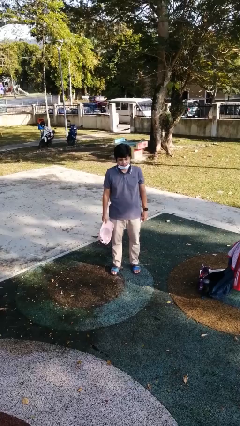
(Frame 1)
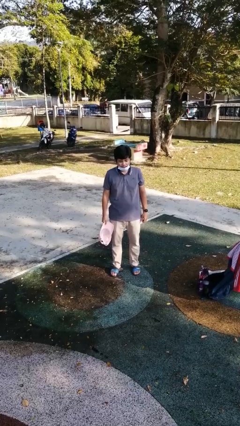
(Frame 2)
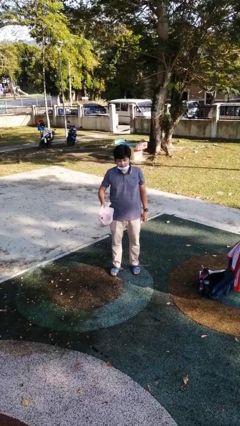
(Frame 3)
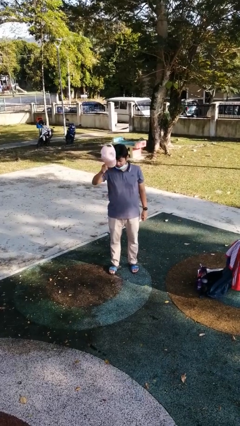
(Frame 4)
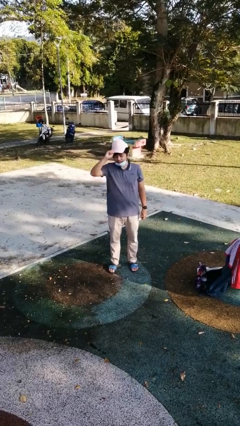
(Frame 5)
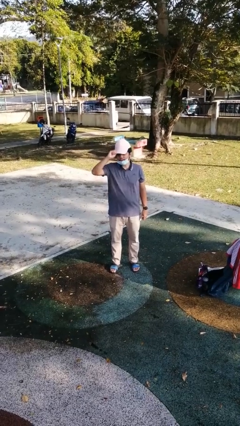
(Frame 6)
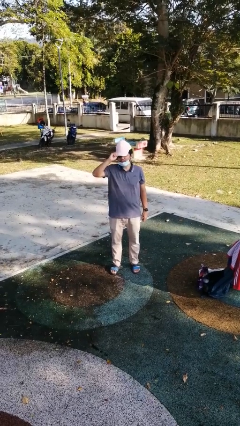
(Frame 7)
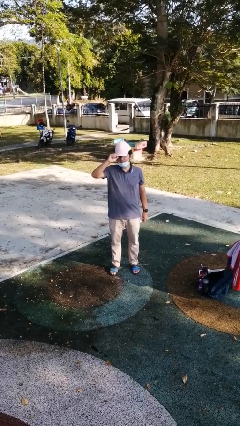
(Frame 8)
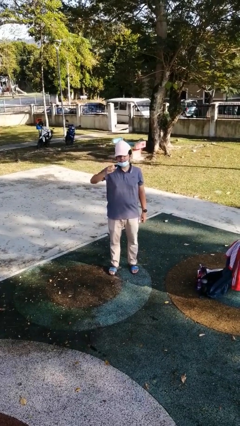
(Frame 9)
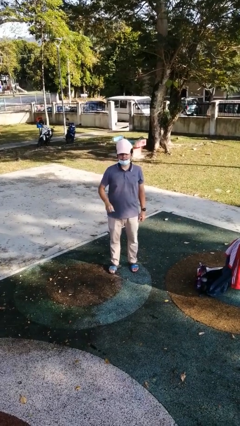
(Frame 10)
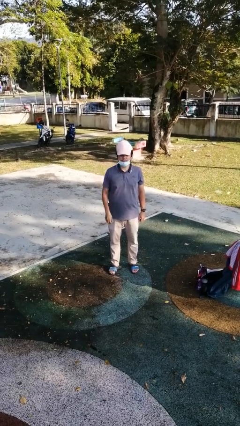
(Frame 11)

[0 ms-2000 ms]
person puts on hat

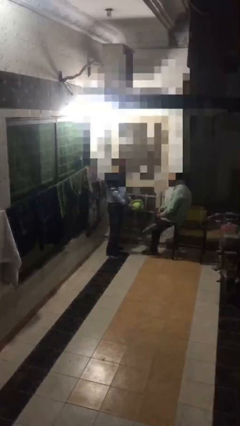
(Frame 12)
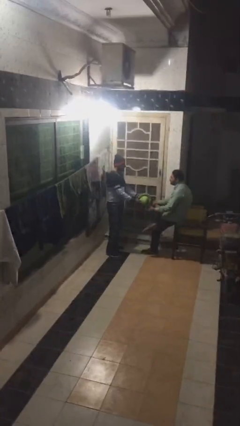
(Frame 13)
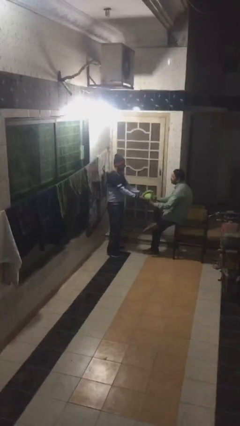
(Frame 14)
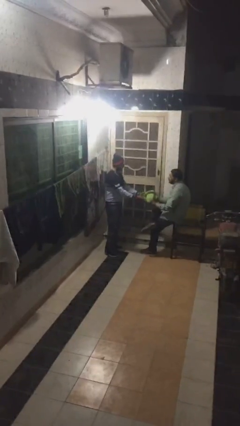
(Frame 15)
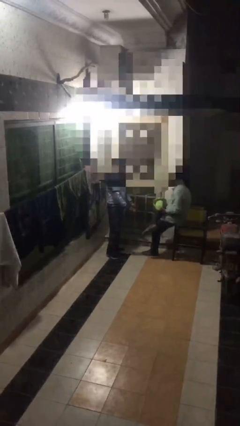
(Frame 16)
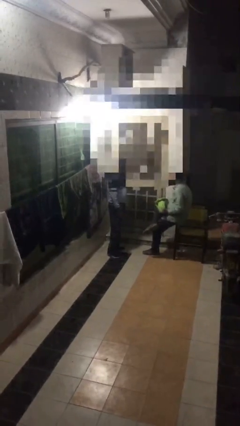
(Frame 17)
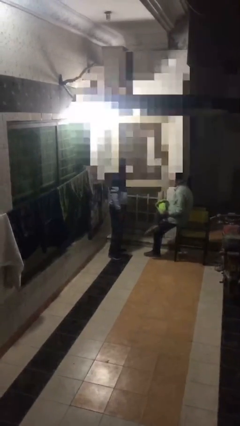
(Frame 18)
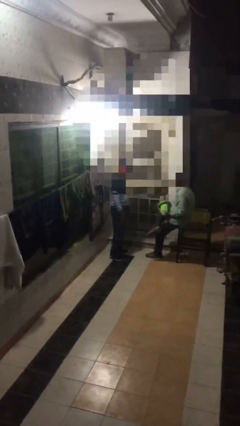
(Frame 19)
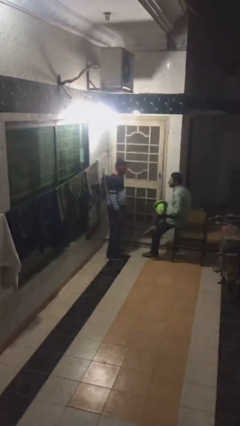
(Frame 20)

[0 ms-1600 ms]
person transfers object to person

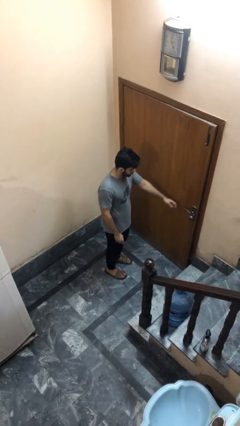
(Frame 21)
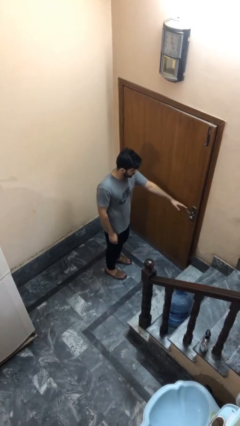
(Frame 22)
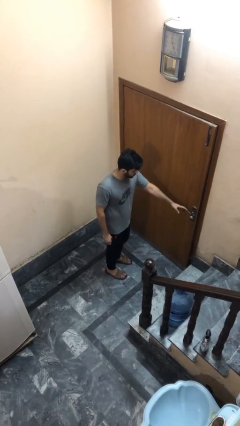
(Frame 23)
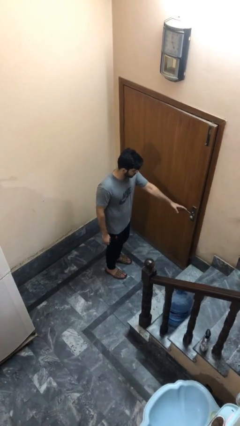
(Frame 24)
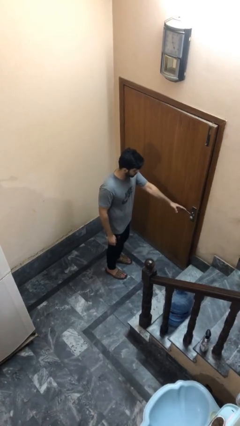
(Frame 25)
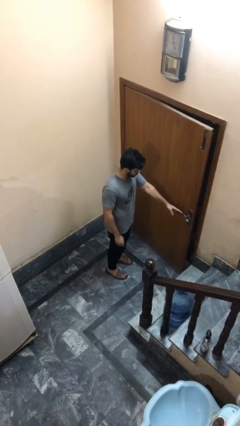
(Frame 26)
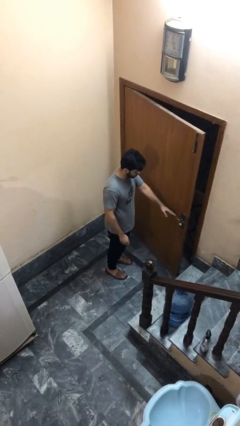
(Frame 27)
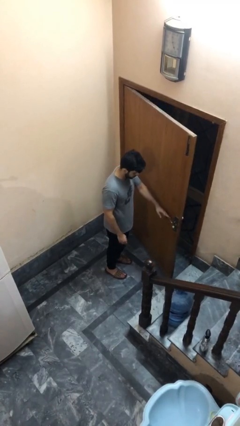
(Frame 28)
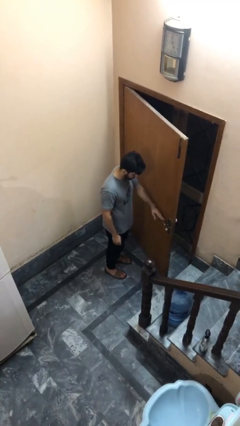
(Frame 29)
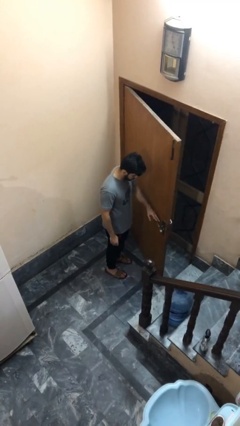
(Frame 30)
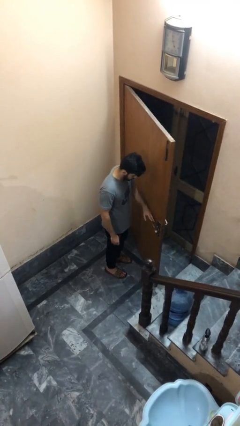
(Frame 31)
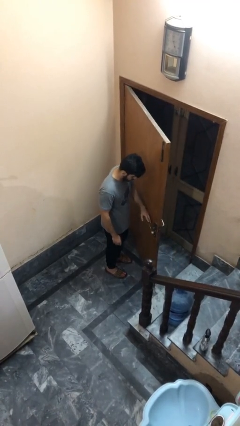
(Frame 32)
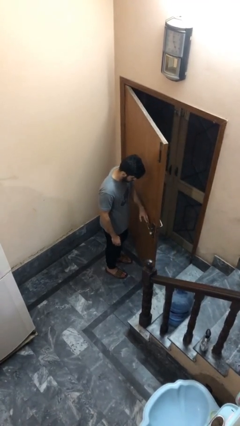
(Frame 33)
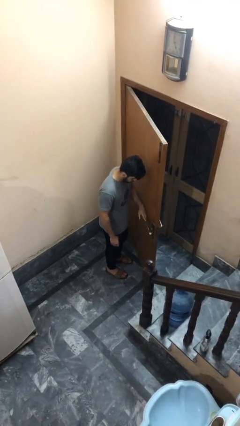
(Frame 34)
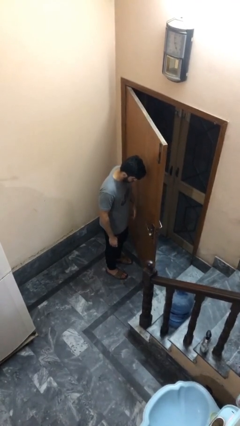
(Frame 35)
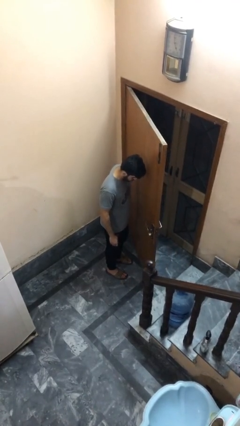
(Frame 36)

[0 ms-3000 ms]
person opens facility door

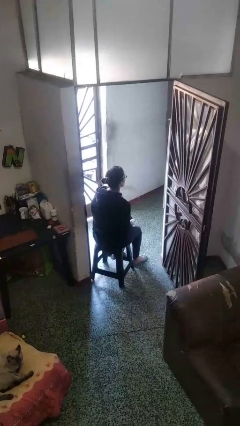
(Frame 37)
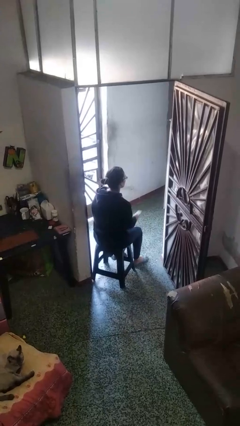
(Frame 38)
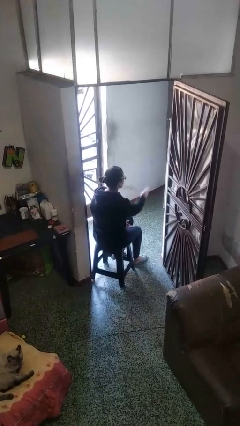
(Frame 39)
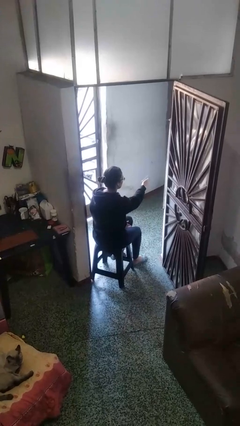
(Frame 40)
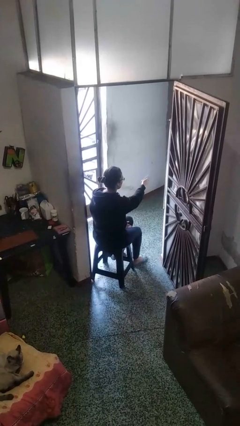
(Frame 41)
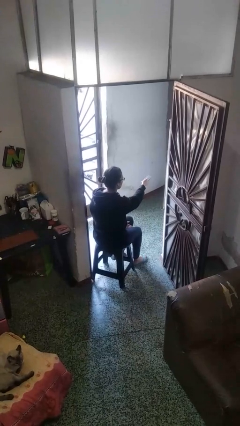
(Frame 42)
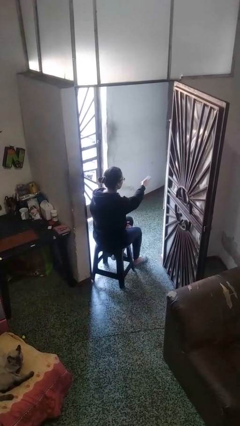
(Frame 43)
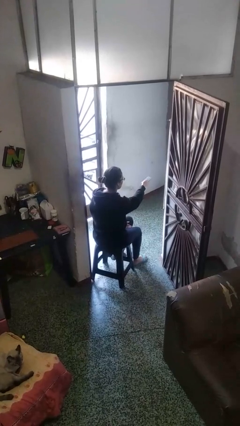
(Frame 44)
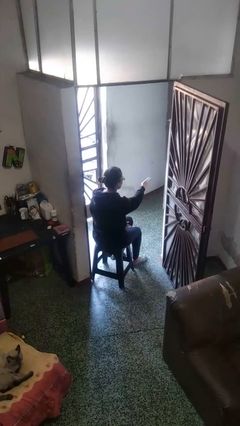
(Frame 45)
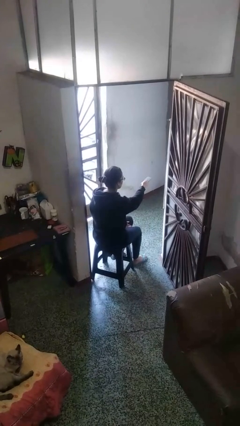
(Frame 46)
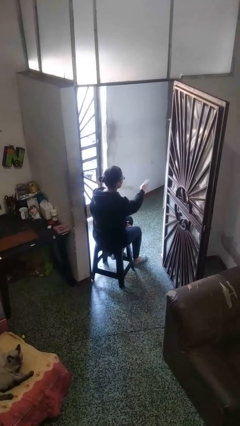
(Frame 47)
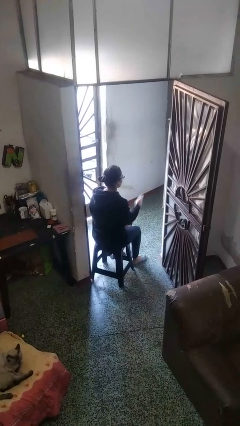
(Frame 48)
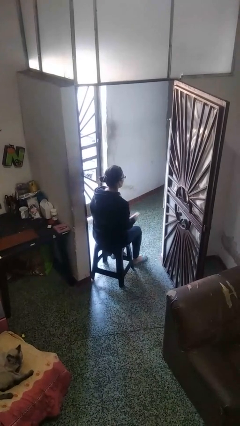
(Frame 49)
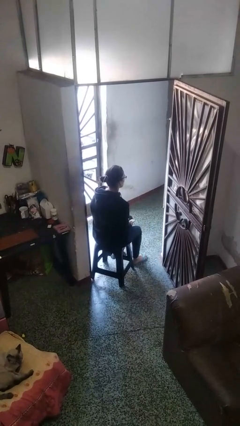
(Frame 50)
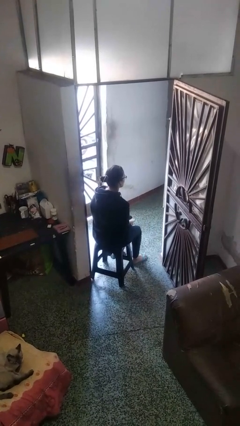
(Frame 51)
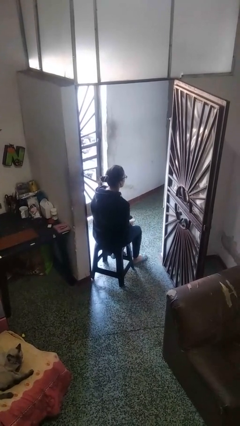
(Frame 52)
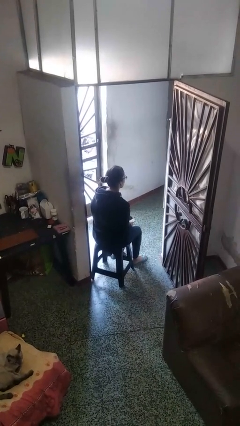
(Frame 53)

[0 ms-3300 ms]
person uses television remote

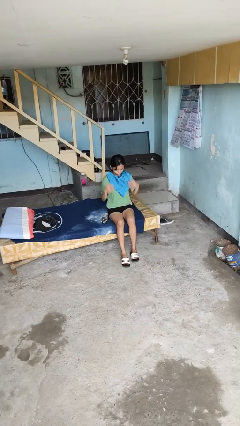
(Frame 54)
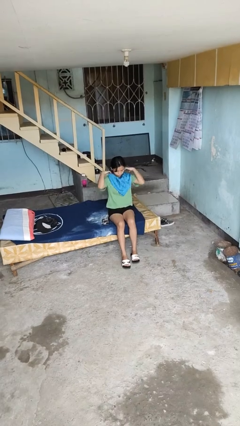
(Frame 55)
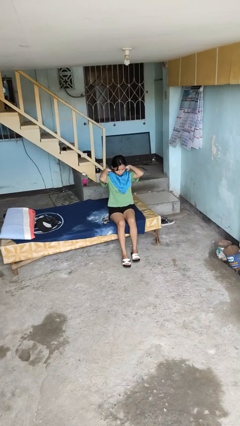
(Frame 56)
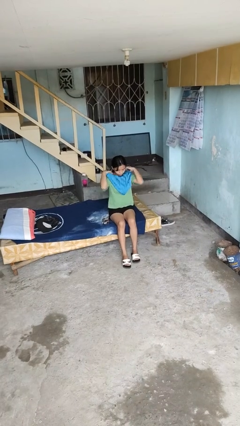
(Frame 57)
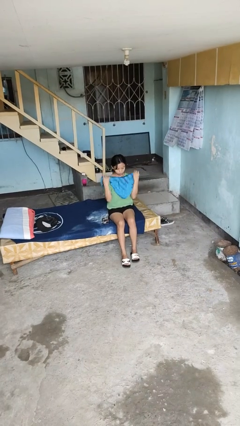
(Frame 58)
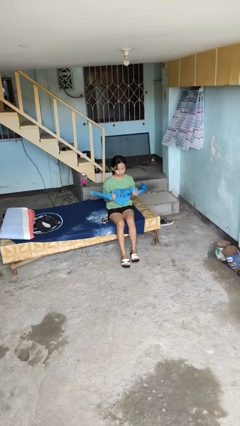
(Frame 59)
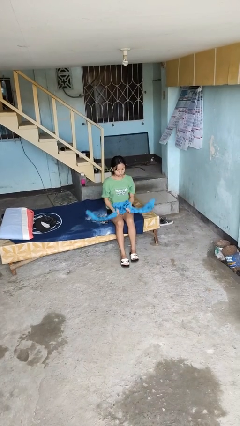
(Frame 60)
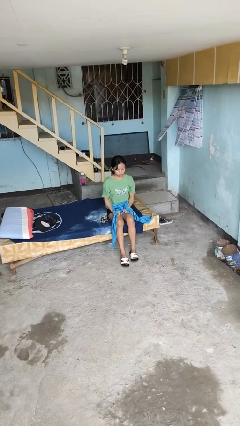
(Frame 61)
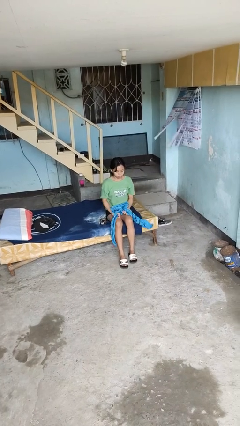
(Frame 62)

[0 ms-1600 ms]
person takes off scarf

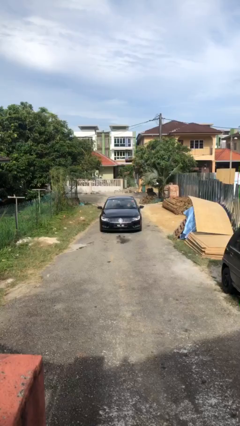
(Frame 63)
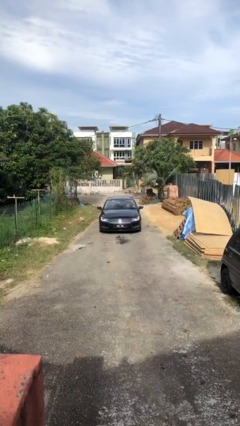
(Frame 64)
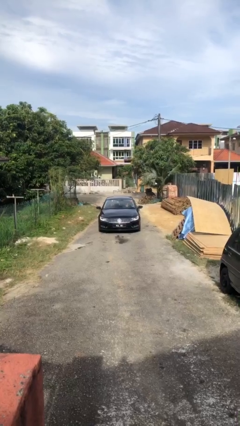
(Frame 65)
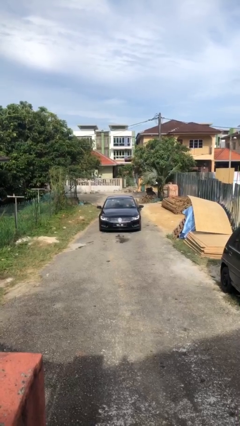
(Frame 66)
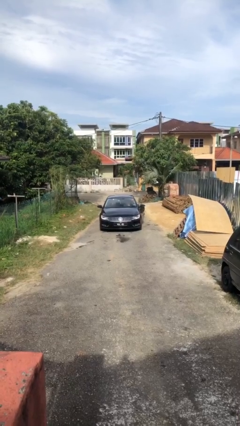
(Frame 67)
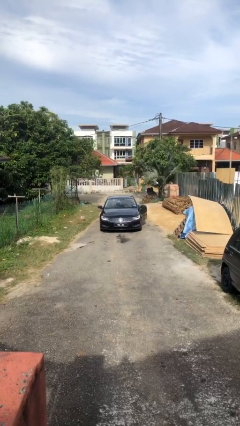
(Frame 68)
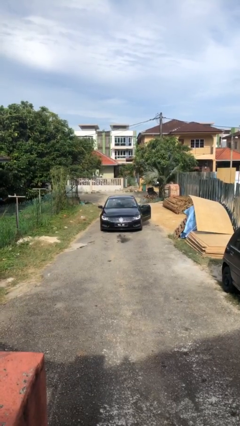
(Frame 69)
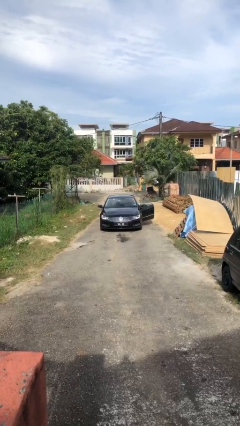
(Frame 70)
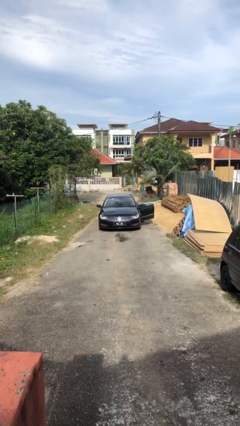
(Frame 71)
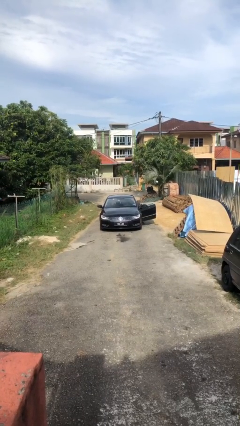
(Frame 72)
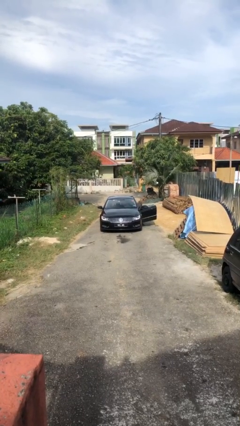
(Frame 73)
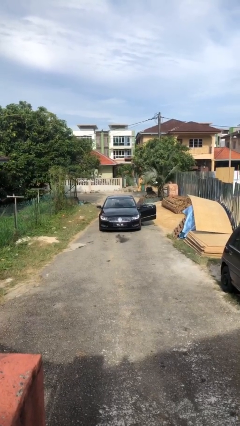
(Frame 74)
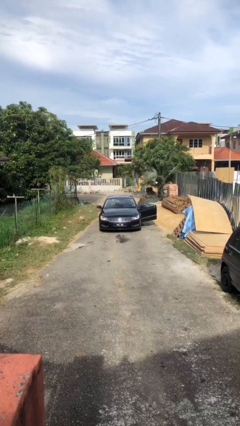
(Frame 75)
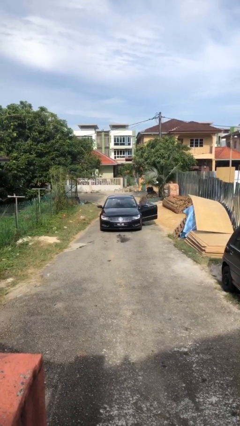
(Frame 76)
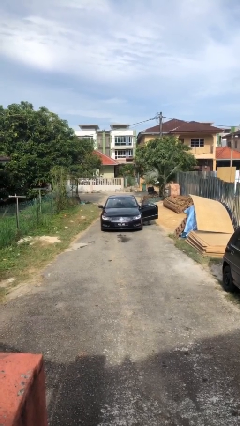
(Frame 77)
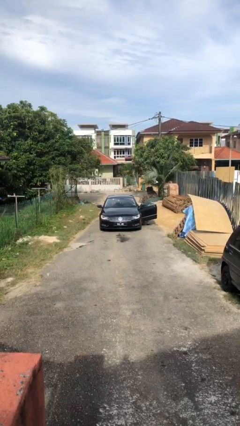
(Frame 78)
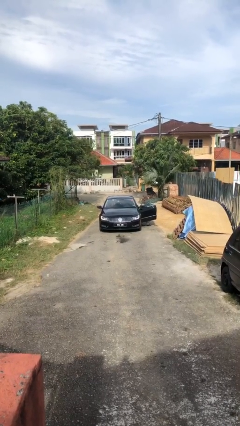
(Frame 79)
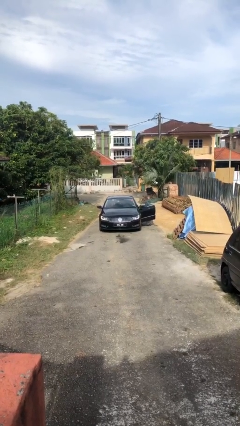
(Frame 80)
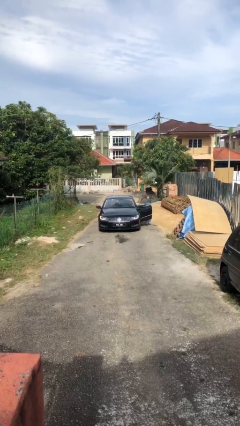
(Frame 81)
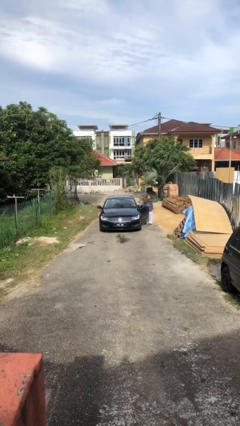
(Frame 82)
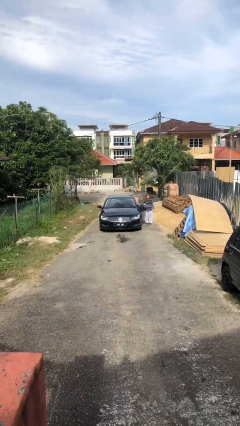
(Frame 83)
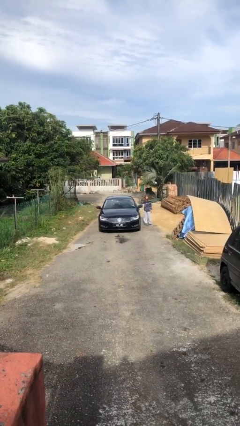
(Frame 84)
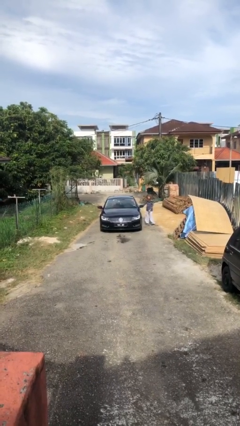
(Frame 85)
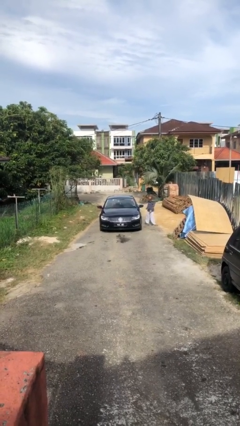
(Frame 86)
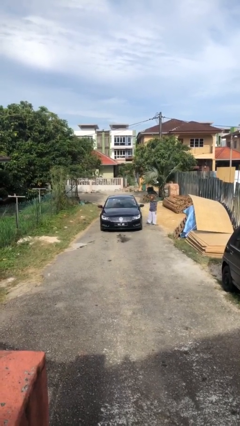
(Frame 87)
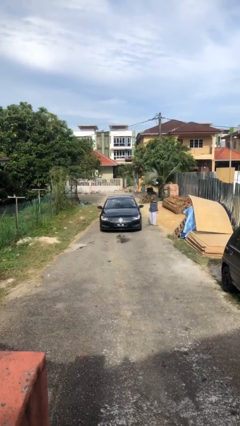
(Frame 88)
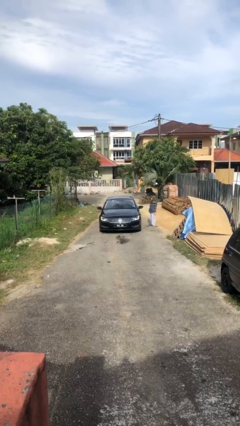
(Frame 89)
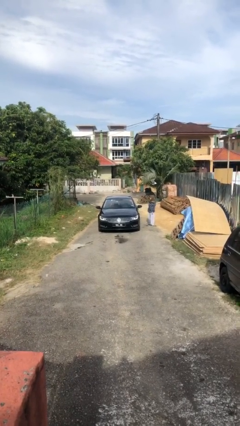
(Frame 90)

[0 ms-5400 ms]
car drops off person

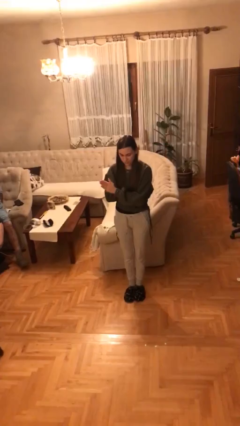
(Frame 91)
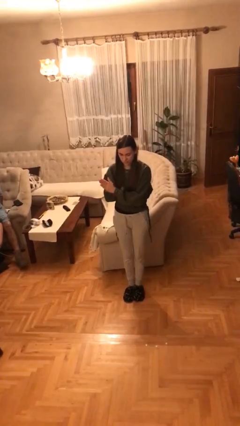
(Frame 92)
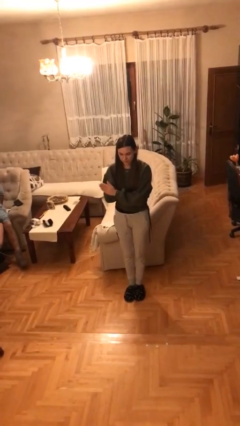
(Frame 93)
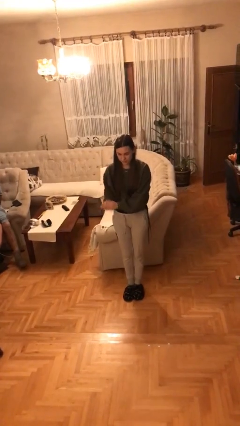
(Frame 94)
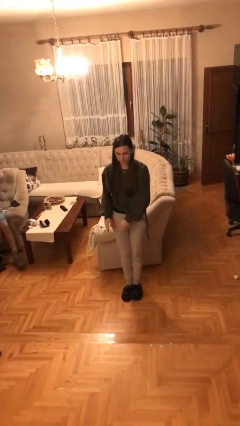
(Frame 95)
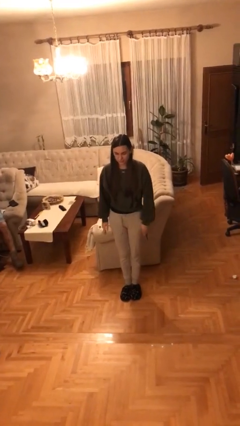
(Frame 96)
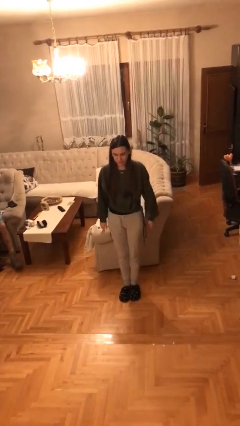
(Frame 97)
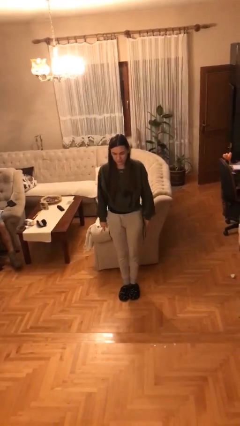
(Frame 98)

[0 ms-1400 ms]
person claps hands
